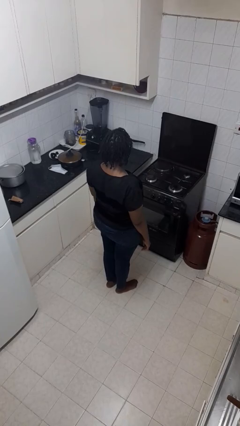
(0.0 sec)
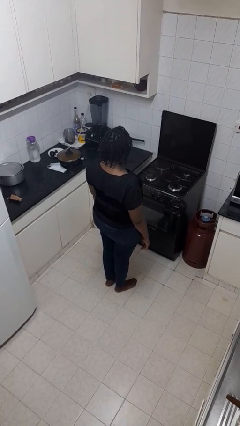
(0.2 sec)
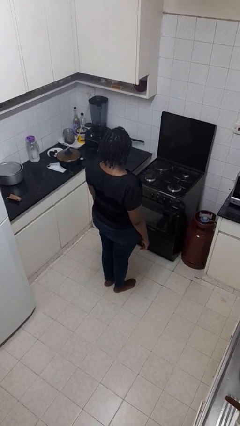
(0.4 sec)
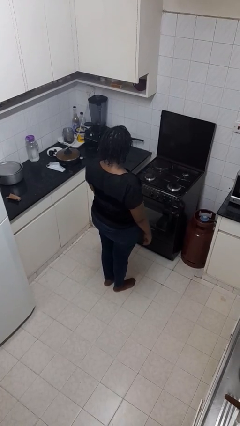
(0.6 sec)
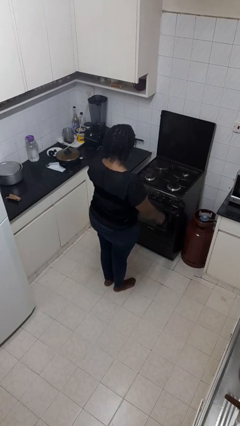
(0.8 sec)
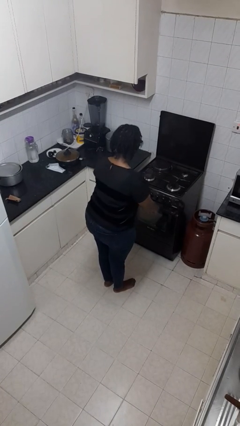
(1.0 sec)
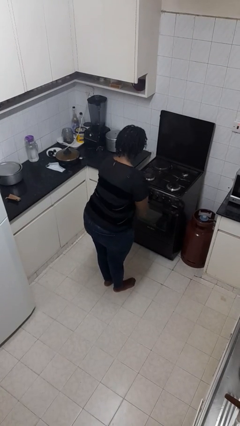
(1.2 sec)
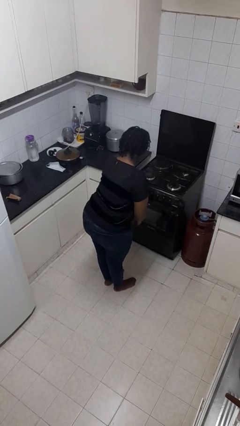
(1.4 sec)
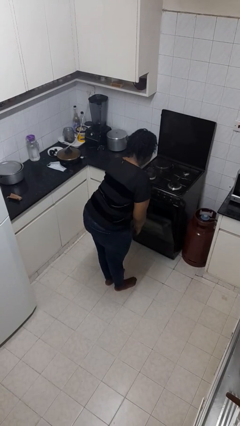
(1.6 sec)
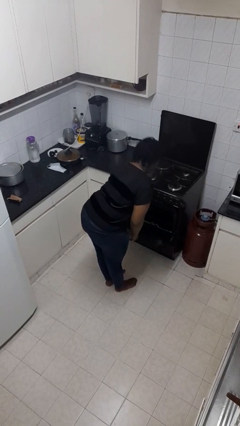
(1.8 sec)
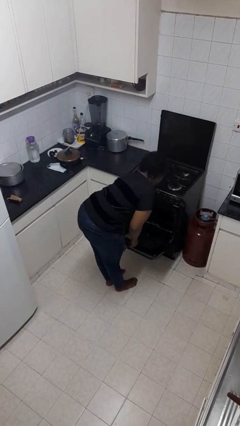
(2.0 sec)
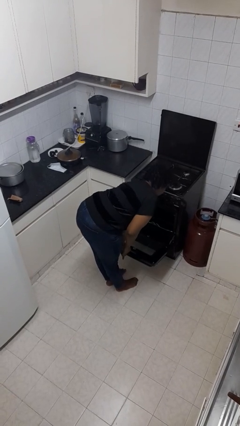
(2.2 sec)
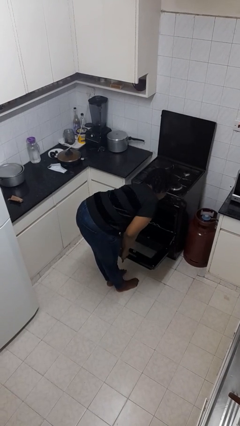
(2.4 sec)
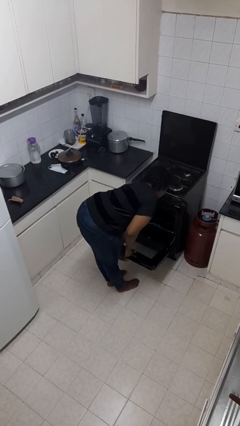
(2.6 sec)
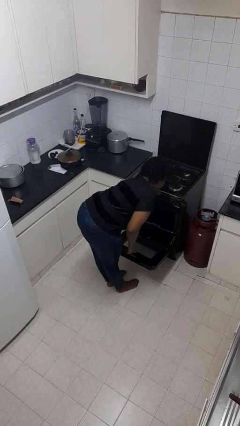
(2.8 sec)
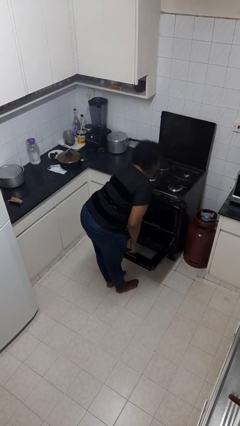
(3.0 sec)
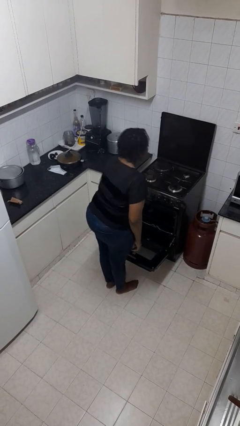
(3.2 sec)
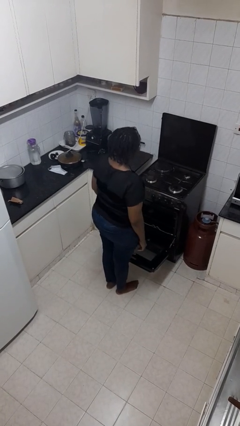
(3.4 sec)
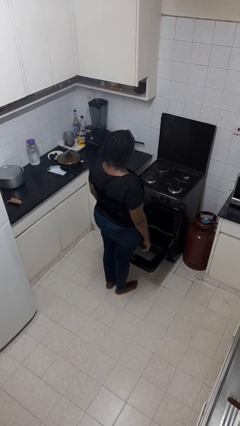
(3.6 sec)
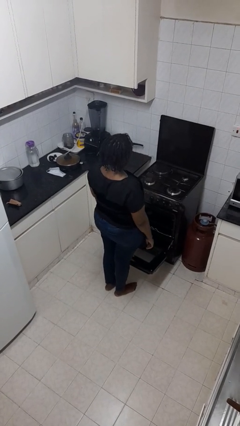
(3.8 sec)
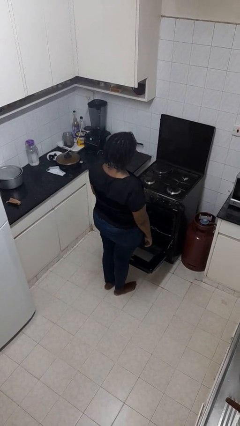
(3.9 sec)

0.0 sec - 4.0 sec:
person opens oven door

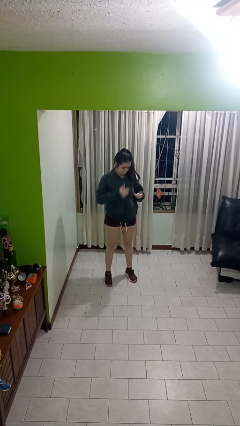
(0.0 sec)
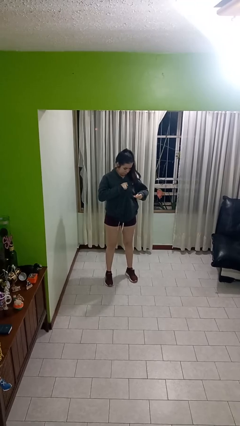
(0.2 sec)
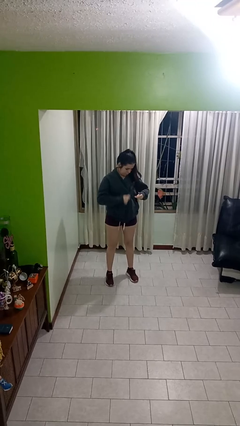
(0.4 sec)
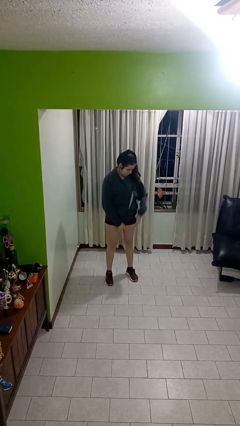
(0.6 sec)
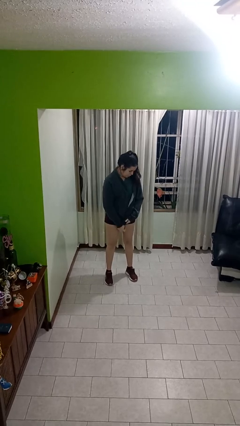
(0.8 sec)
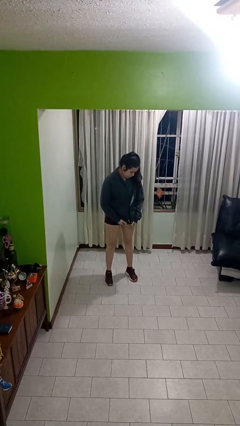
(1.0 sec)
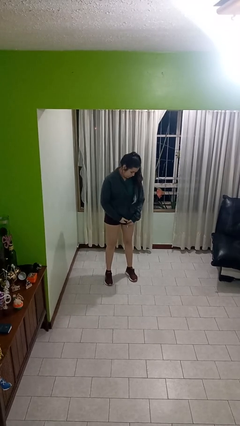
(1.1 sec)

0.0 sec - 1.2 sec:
person unzips jacket

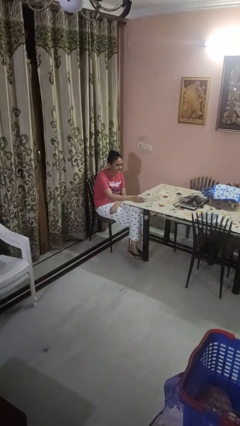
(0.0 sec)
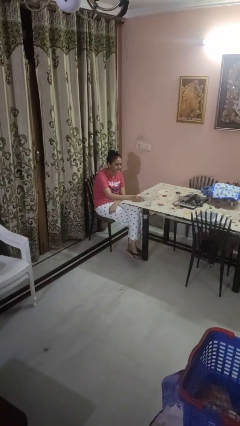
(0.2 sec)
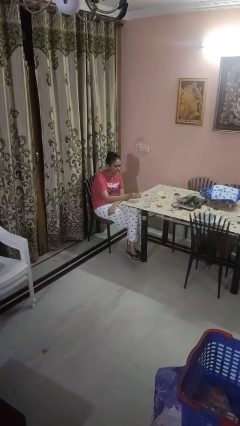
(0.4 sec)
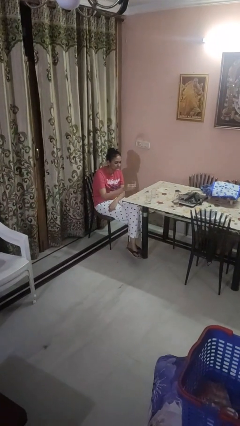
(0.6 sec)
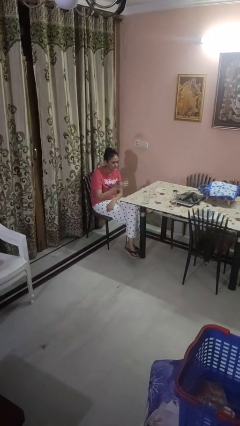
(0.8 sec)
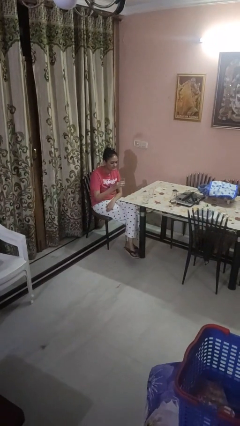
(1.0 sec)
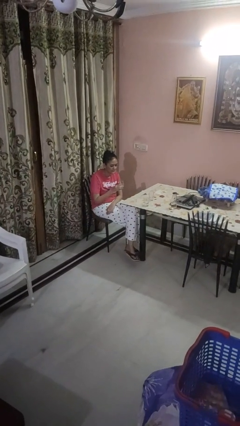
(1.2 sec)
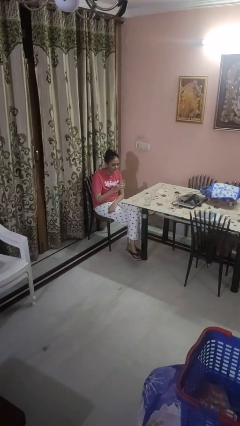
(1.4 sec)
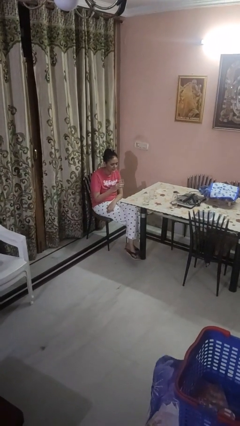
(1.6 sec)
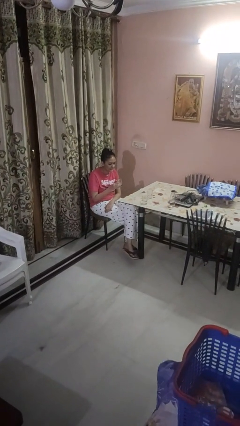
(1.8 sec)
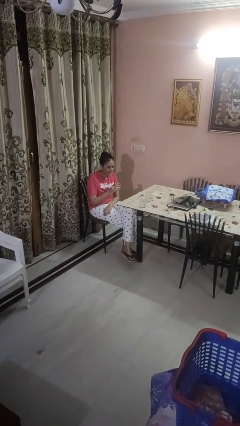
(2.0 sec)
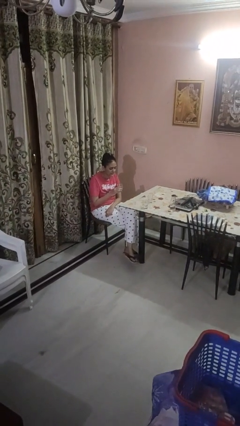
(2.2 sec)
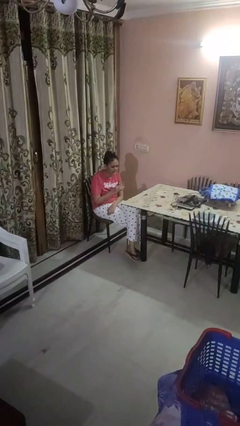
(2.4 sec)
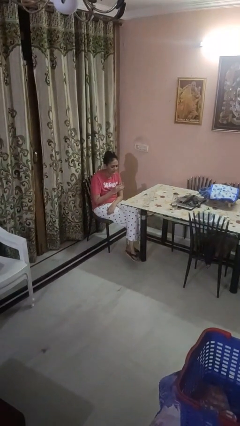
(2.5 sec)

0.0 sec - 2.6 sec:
person picks up object from table

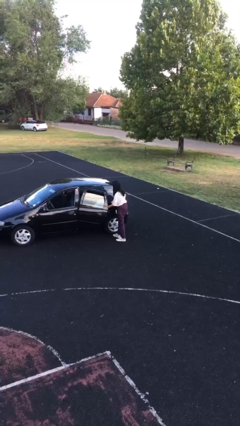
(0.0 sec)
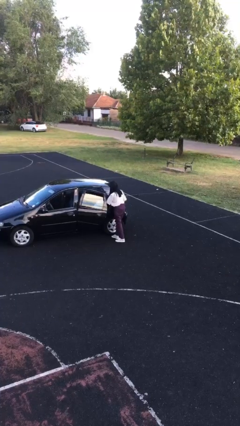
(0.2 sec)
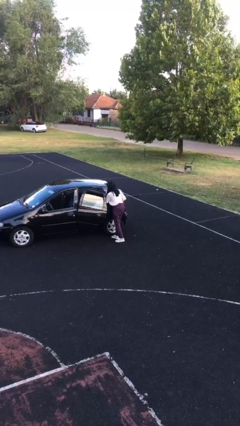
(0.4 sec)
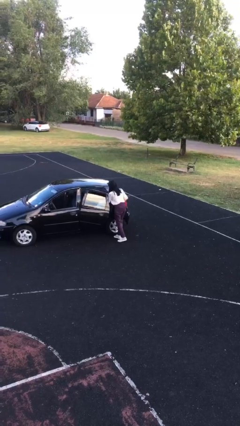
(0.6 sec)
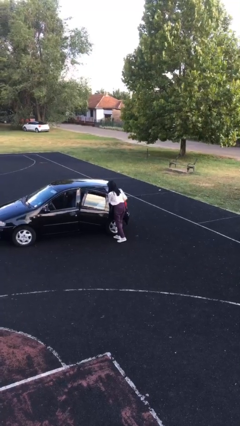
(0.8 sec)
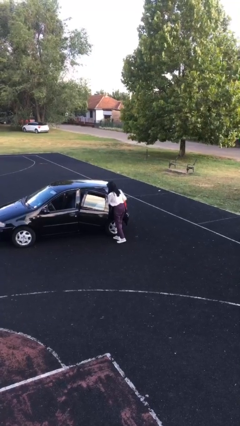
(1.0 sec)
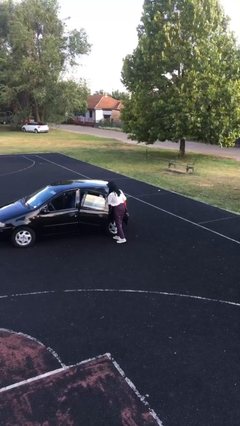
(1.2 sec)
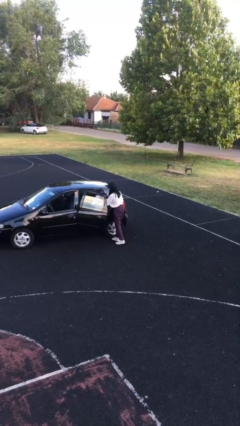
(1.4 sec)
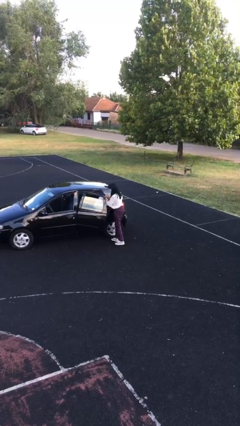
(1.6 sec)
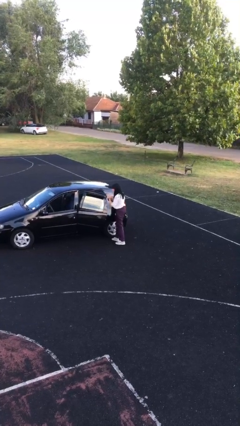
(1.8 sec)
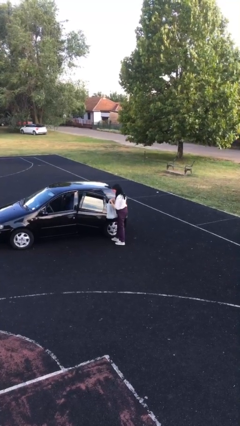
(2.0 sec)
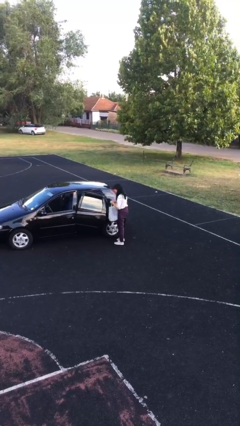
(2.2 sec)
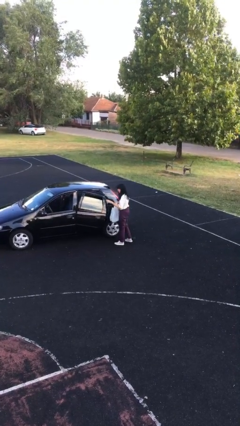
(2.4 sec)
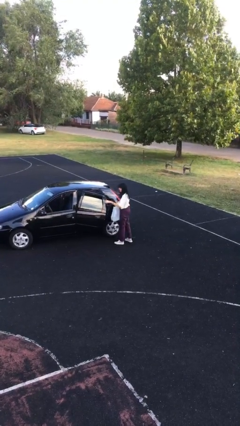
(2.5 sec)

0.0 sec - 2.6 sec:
person unloads car

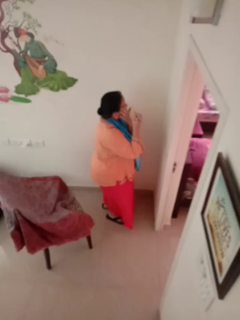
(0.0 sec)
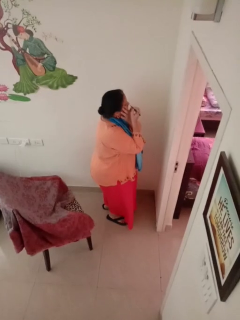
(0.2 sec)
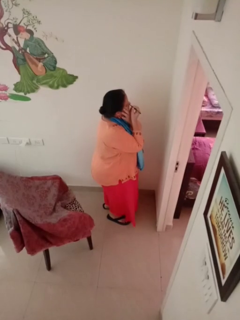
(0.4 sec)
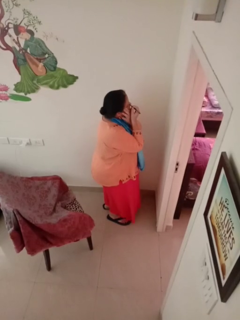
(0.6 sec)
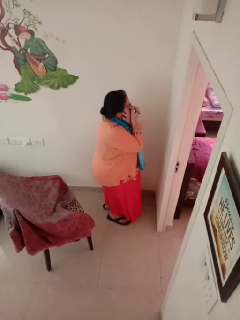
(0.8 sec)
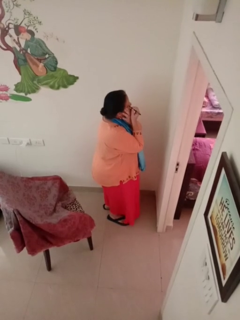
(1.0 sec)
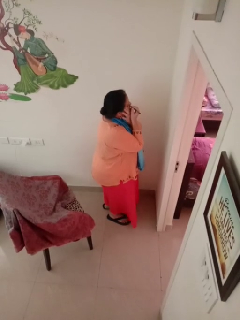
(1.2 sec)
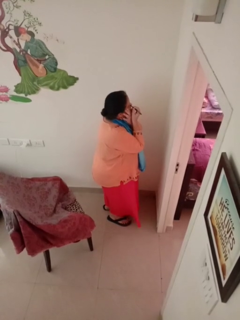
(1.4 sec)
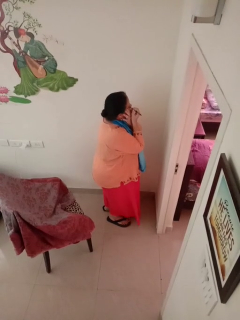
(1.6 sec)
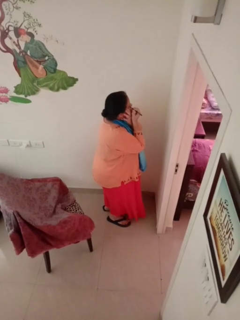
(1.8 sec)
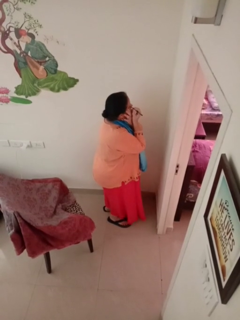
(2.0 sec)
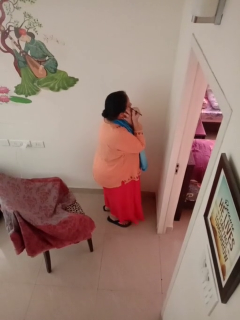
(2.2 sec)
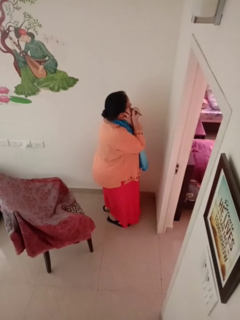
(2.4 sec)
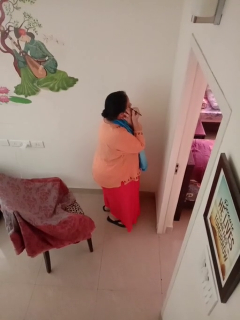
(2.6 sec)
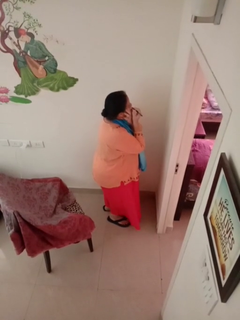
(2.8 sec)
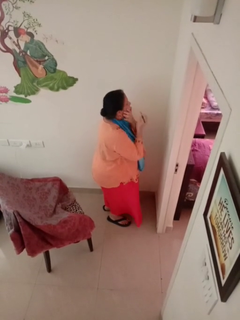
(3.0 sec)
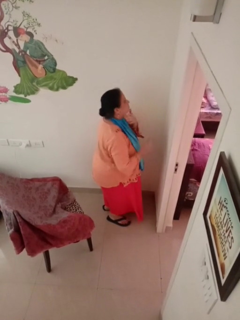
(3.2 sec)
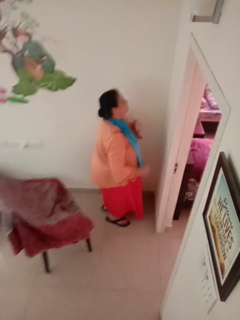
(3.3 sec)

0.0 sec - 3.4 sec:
person applies eye makeup

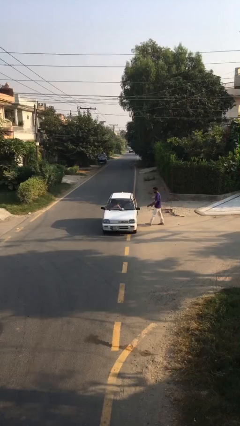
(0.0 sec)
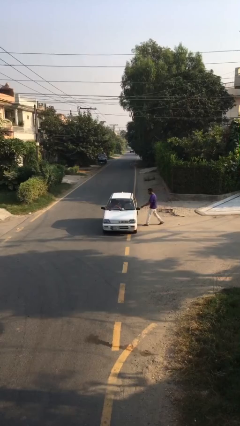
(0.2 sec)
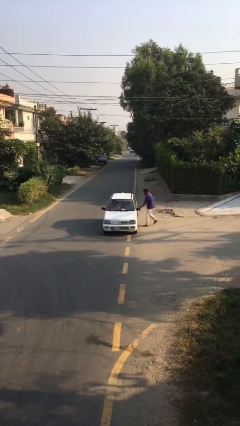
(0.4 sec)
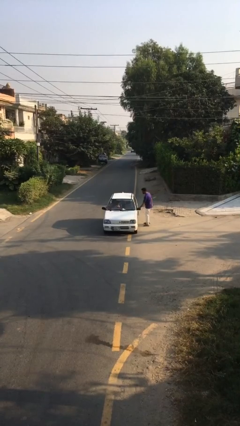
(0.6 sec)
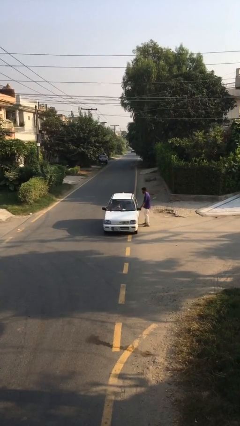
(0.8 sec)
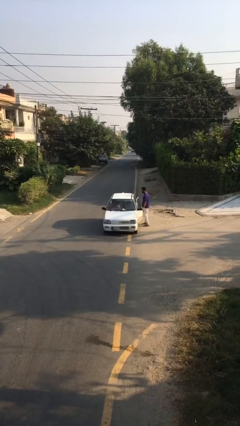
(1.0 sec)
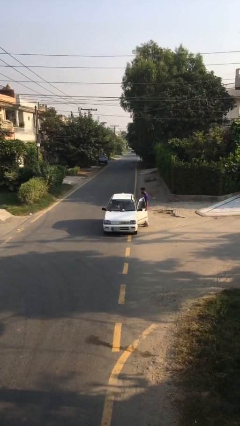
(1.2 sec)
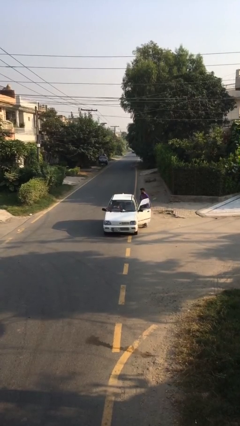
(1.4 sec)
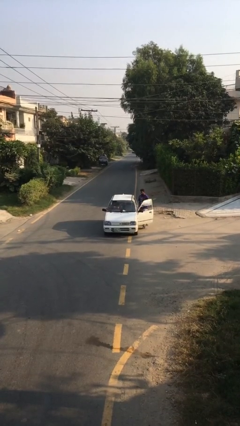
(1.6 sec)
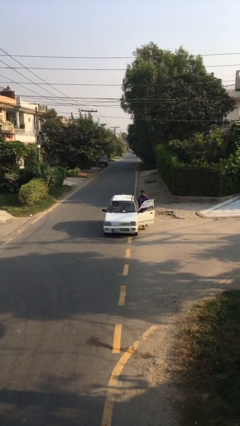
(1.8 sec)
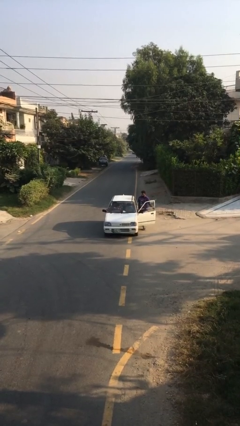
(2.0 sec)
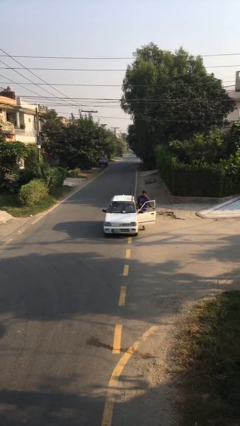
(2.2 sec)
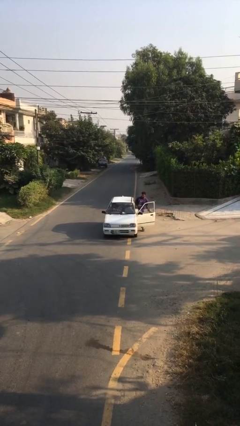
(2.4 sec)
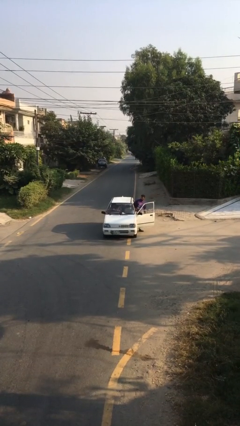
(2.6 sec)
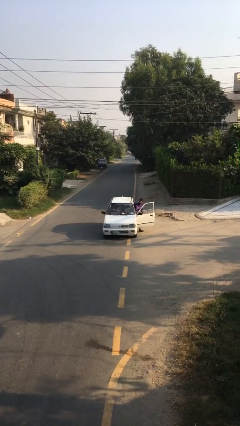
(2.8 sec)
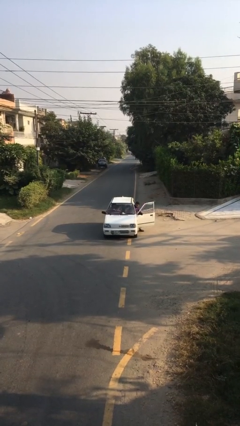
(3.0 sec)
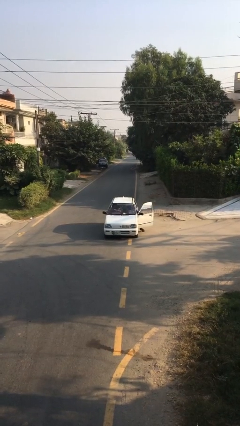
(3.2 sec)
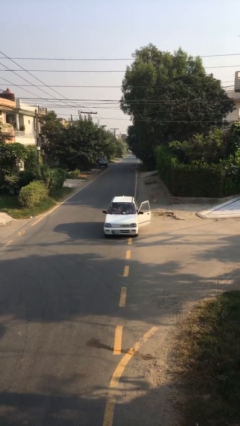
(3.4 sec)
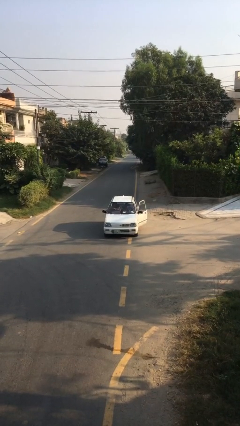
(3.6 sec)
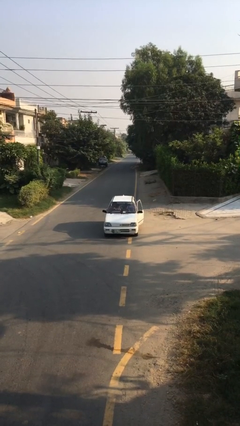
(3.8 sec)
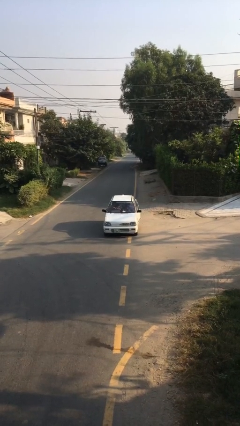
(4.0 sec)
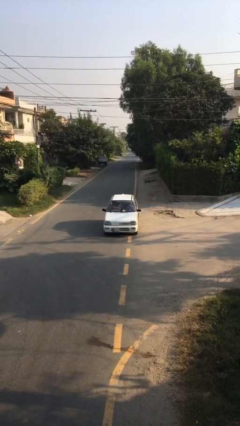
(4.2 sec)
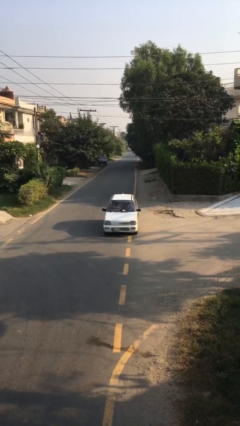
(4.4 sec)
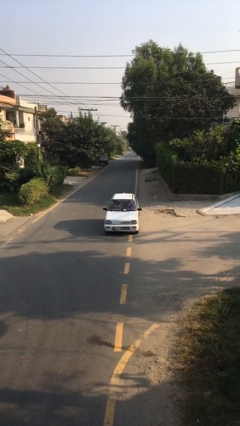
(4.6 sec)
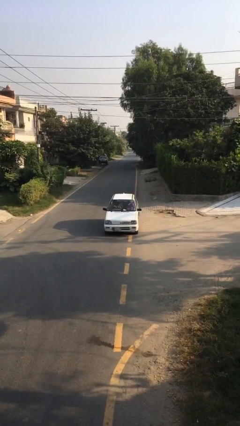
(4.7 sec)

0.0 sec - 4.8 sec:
car picks up person
